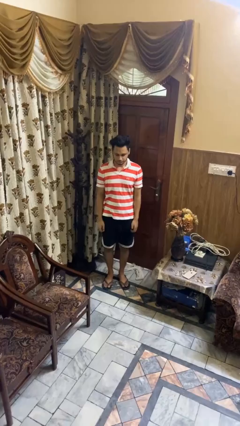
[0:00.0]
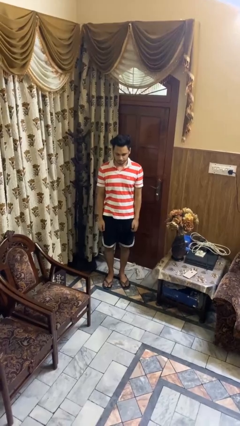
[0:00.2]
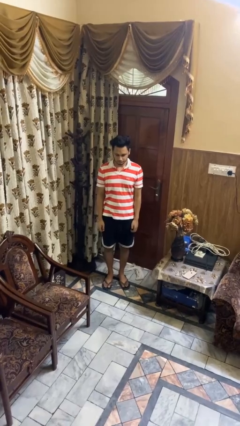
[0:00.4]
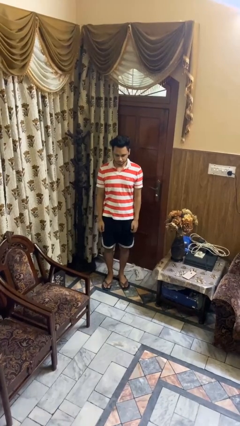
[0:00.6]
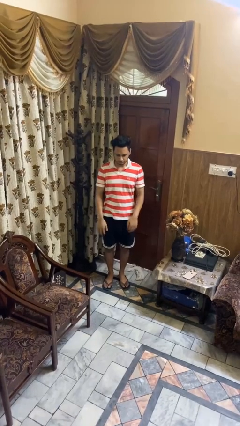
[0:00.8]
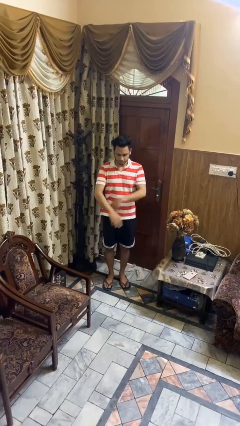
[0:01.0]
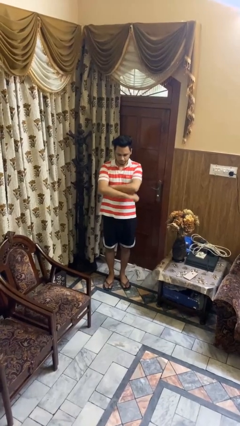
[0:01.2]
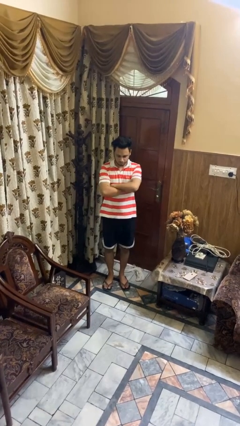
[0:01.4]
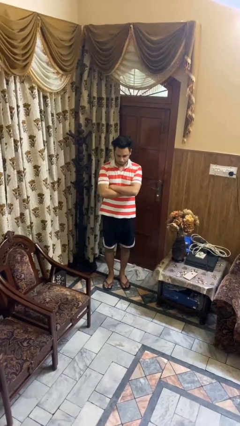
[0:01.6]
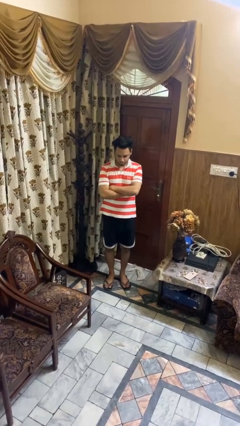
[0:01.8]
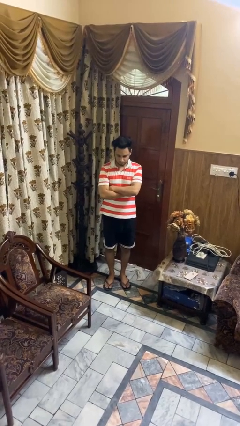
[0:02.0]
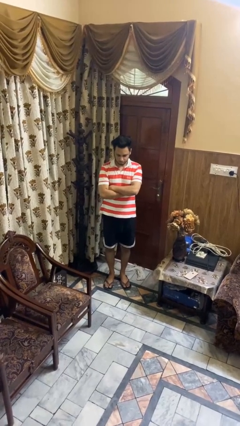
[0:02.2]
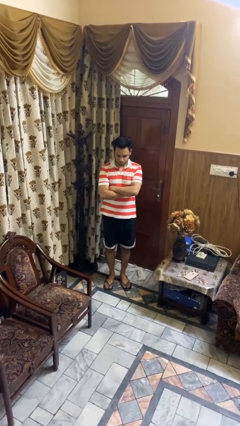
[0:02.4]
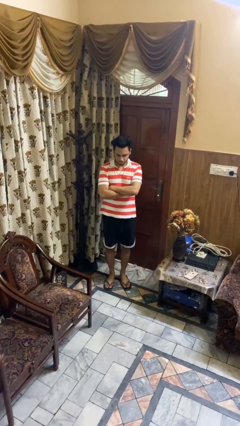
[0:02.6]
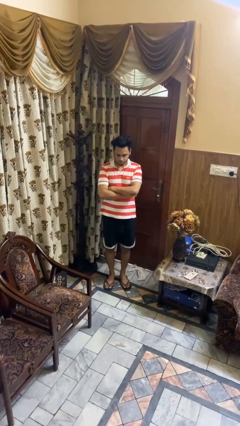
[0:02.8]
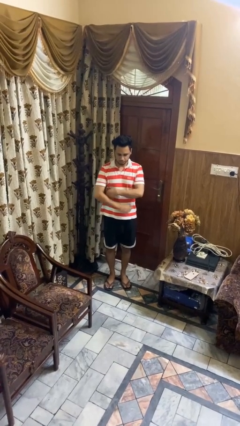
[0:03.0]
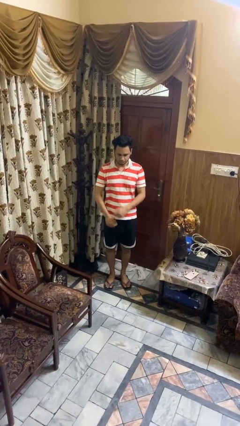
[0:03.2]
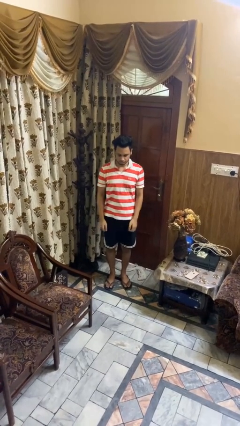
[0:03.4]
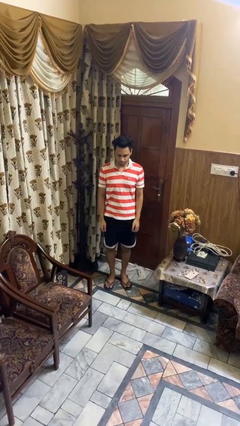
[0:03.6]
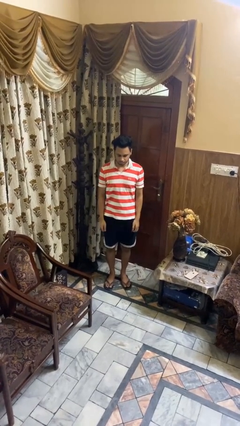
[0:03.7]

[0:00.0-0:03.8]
person crosses arms

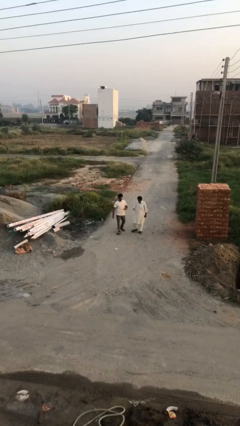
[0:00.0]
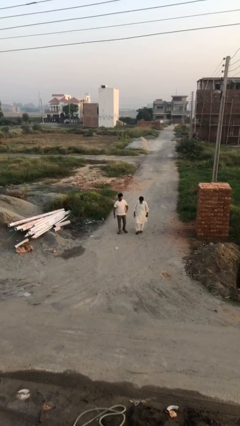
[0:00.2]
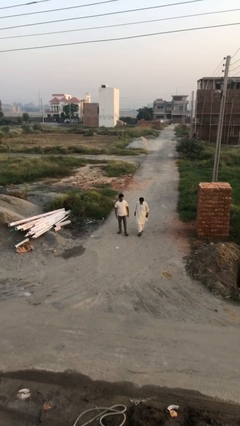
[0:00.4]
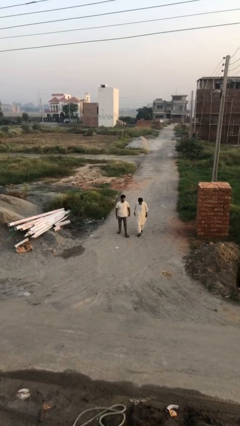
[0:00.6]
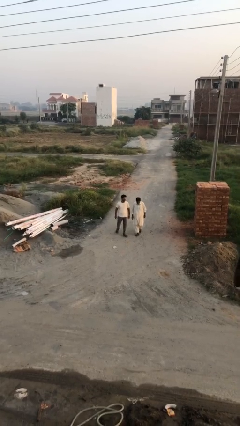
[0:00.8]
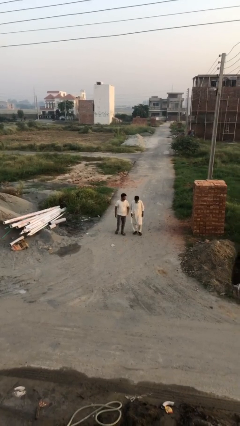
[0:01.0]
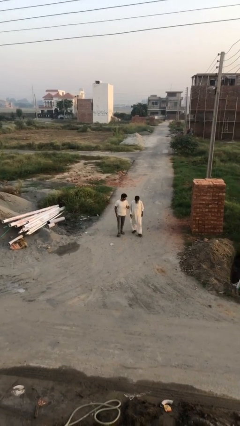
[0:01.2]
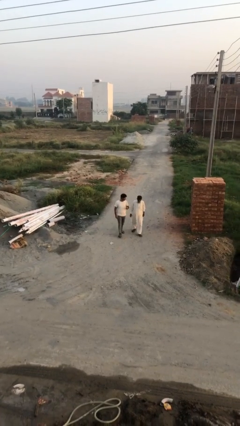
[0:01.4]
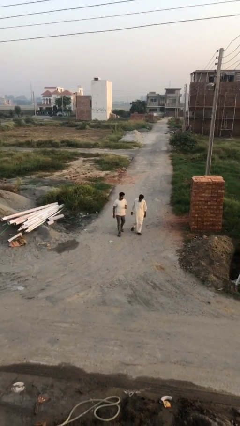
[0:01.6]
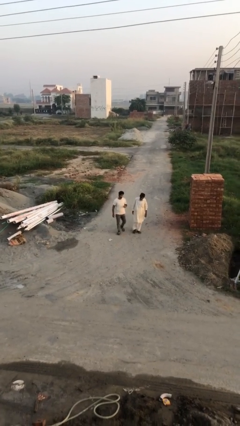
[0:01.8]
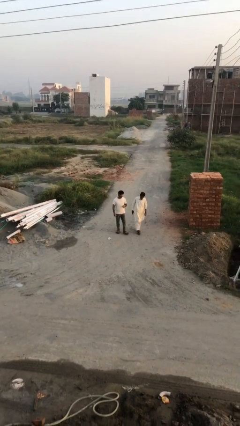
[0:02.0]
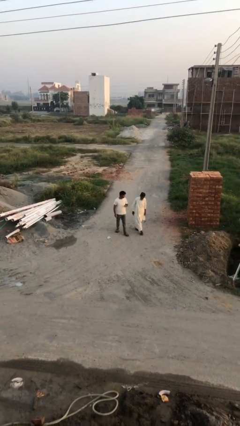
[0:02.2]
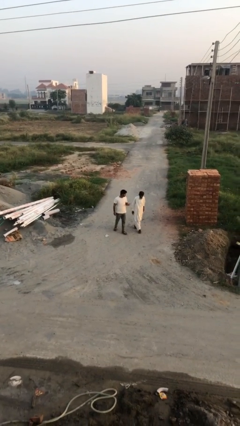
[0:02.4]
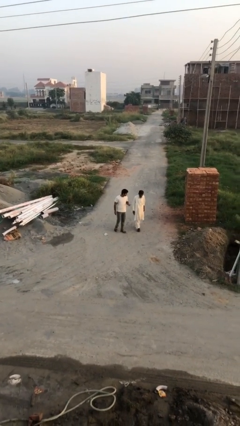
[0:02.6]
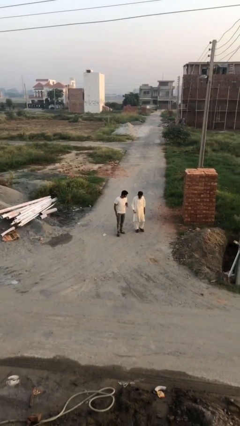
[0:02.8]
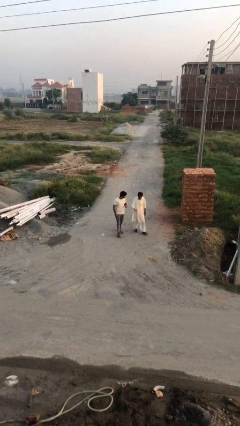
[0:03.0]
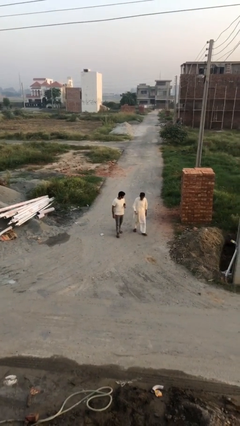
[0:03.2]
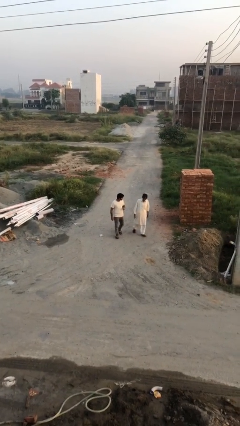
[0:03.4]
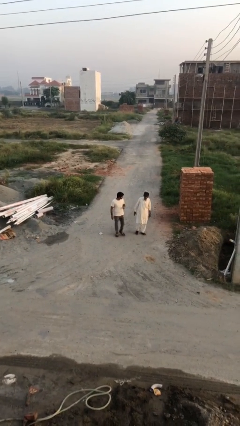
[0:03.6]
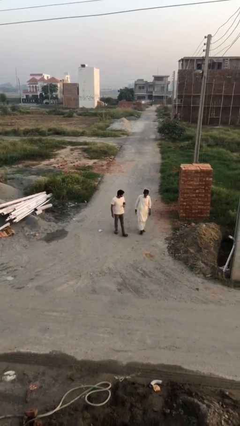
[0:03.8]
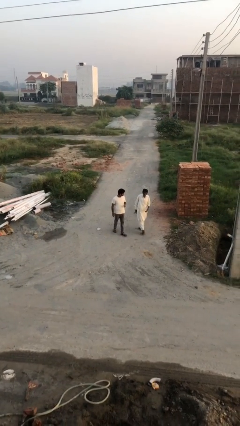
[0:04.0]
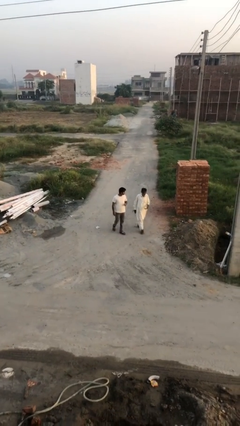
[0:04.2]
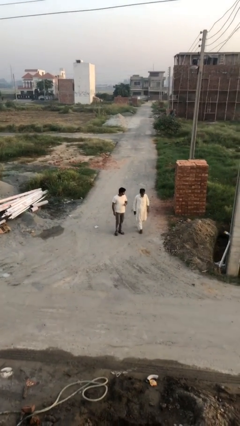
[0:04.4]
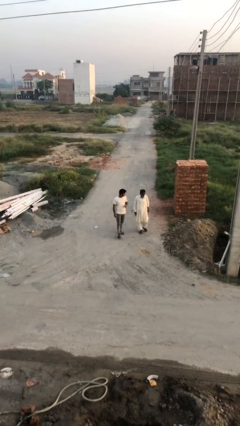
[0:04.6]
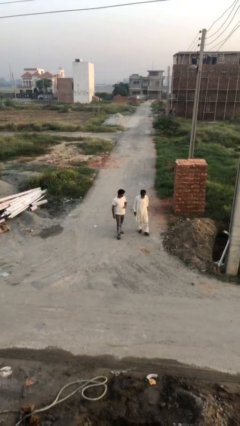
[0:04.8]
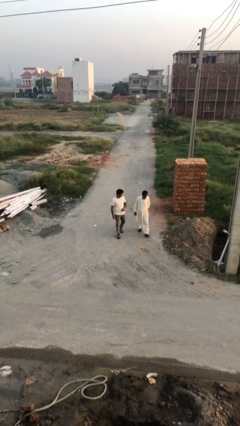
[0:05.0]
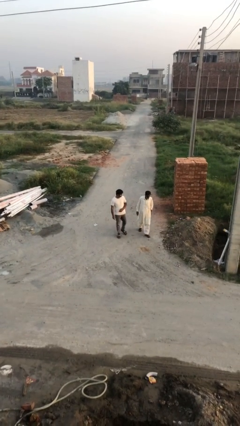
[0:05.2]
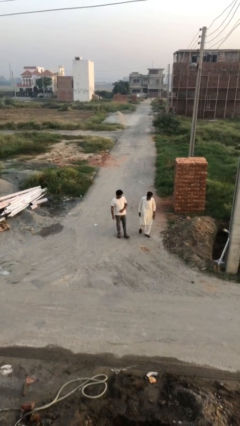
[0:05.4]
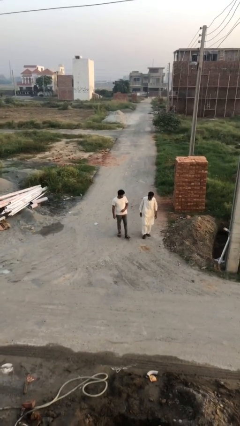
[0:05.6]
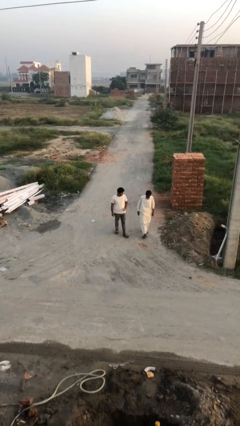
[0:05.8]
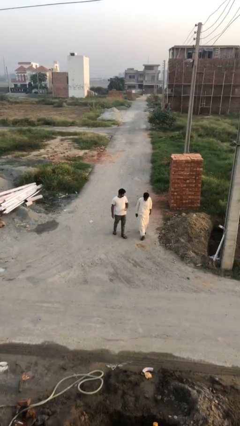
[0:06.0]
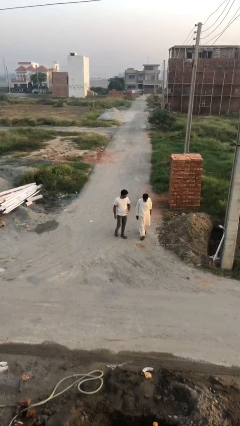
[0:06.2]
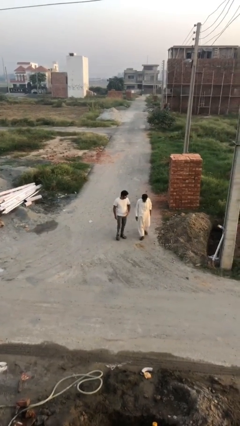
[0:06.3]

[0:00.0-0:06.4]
person talks to person

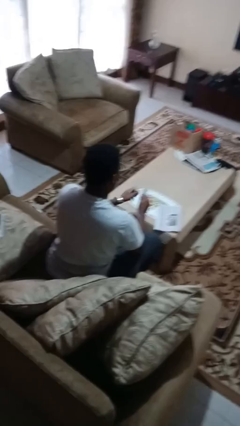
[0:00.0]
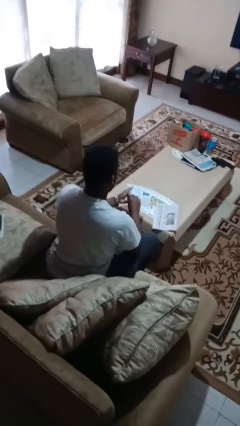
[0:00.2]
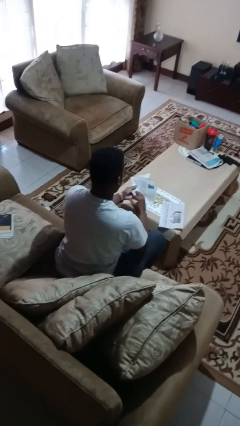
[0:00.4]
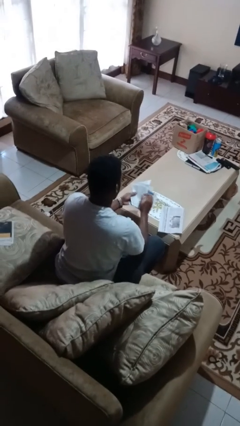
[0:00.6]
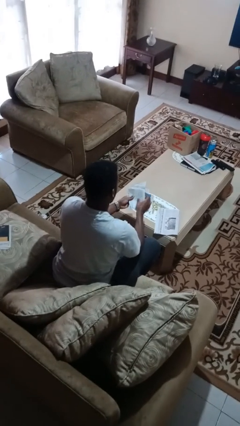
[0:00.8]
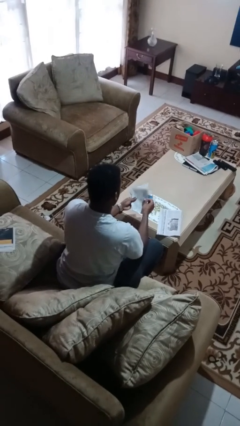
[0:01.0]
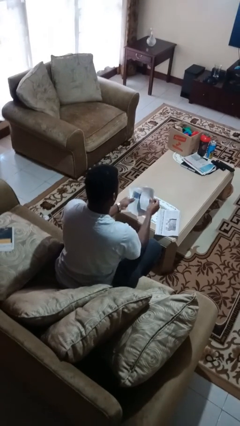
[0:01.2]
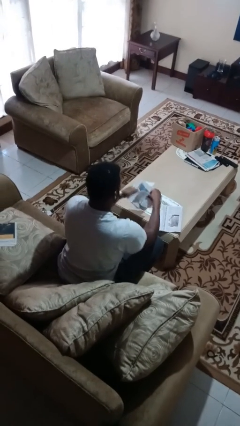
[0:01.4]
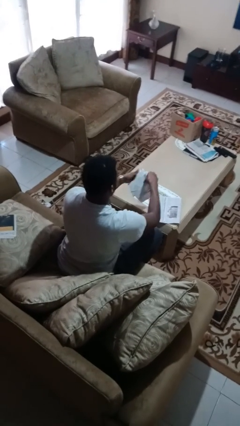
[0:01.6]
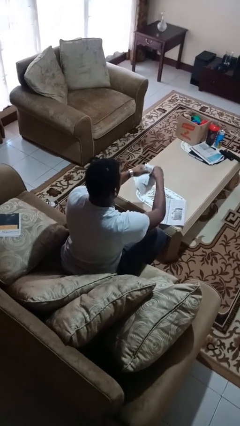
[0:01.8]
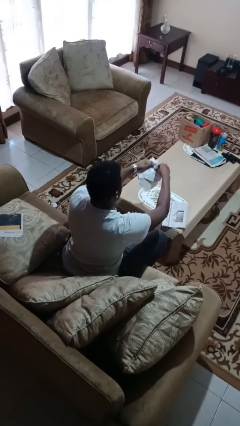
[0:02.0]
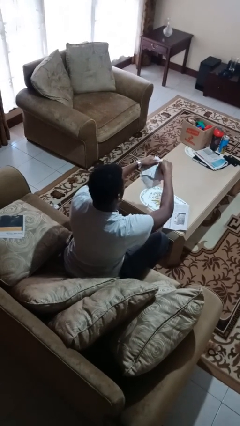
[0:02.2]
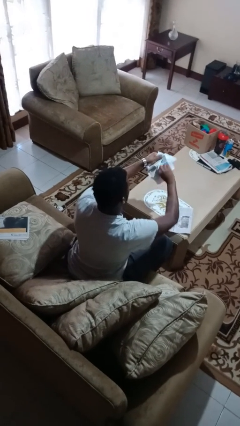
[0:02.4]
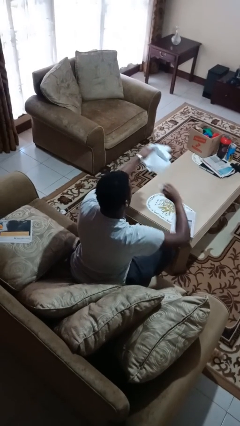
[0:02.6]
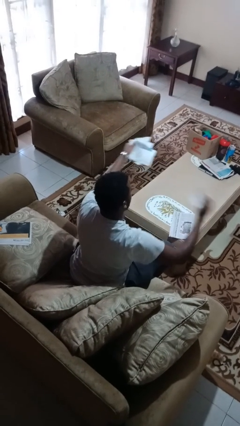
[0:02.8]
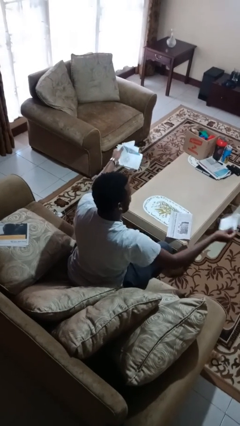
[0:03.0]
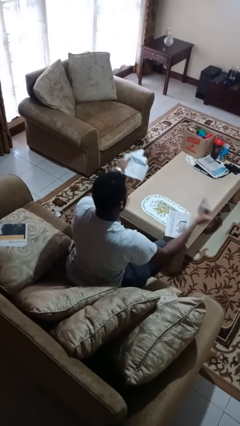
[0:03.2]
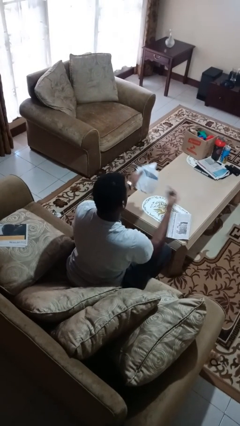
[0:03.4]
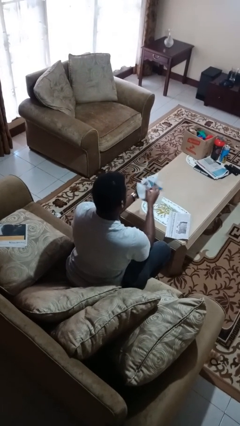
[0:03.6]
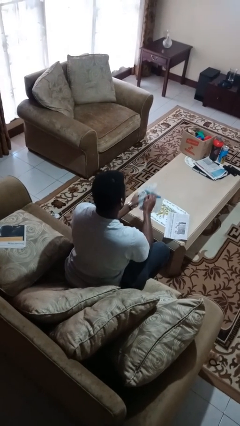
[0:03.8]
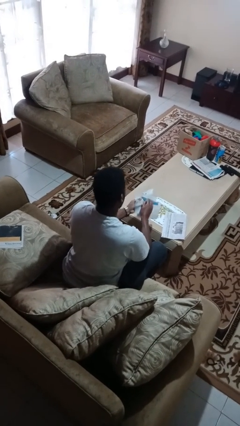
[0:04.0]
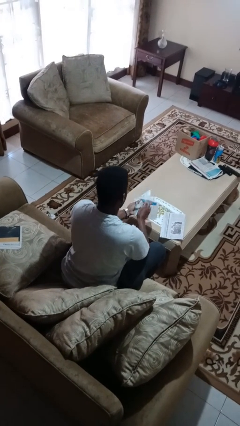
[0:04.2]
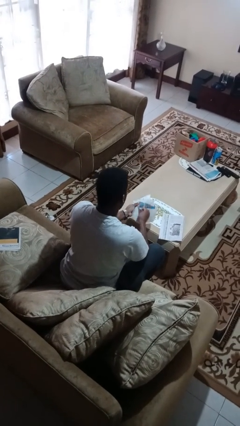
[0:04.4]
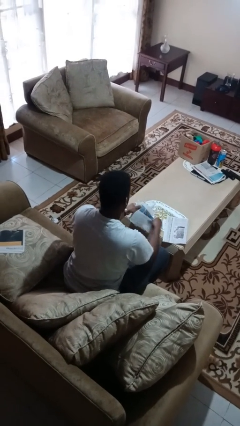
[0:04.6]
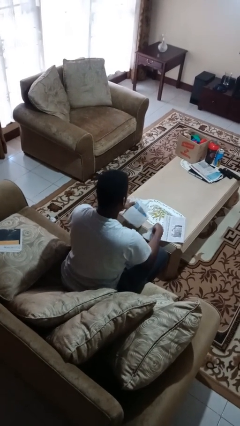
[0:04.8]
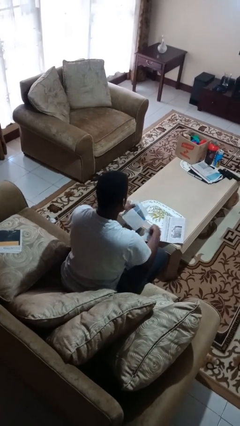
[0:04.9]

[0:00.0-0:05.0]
person tears paper

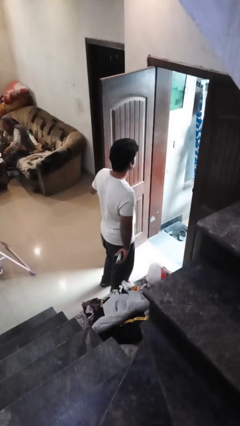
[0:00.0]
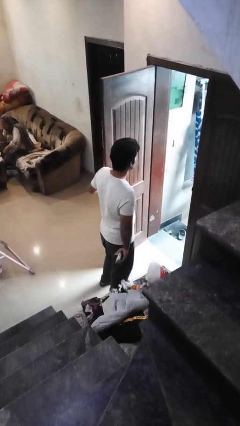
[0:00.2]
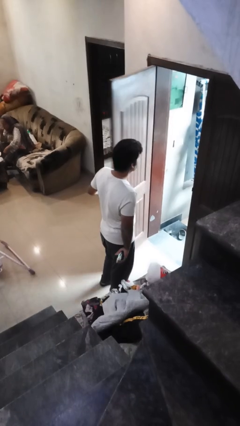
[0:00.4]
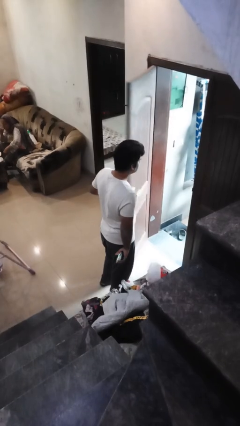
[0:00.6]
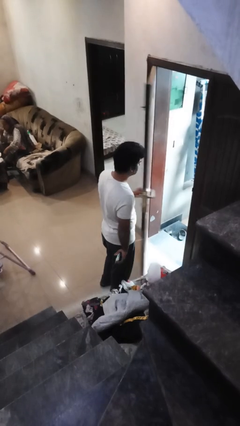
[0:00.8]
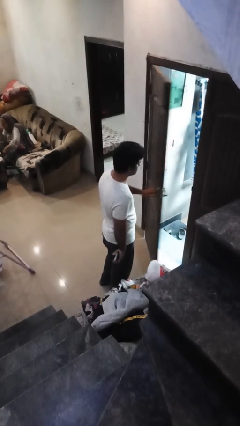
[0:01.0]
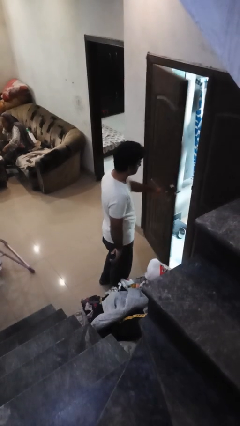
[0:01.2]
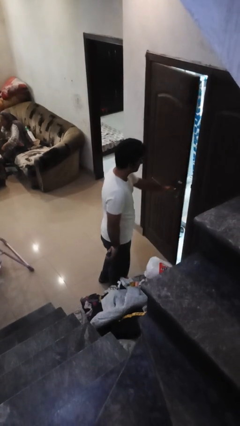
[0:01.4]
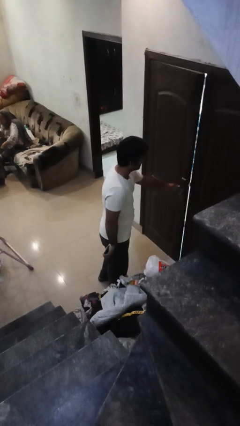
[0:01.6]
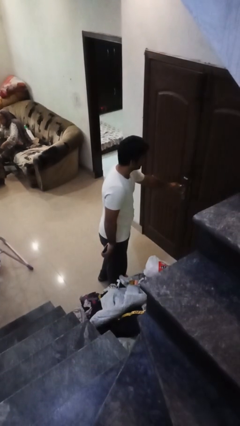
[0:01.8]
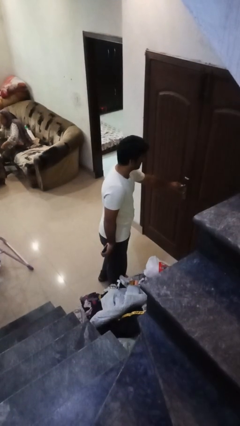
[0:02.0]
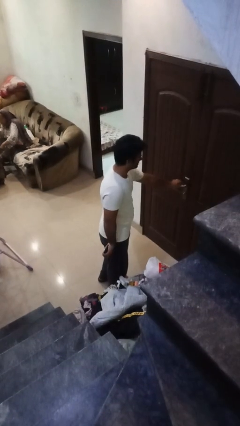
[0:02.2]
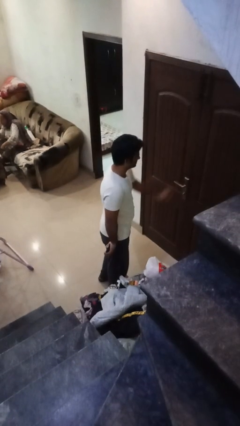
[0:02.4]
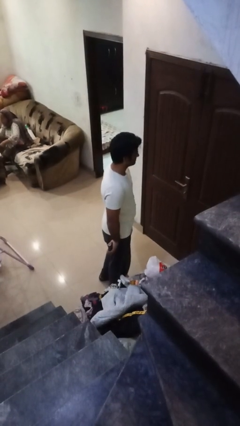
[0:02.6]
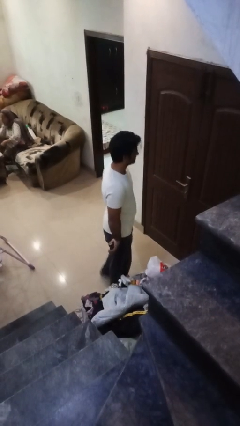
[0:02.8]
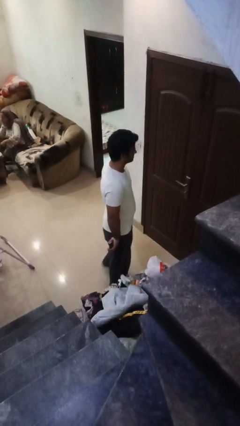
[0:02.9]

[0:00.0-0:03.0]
person closes facility door
